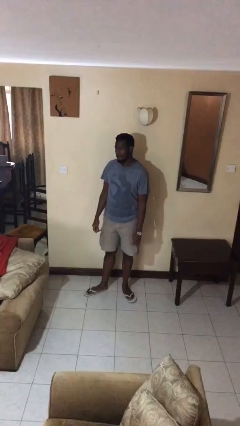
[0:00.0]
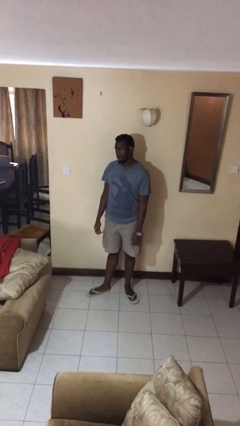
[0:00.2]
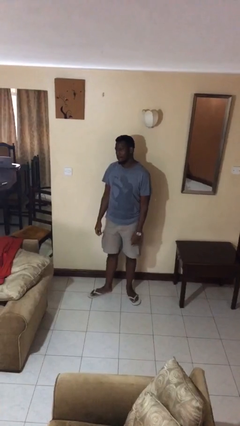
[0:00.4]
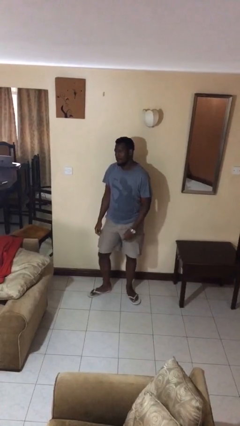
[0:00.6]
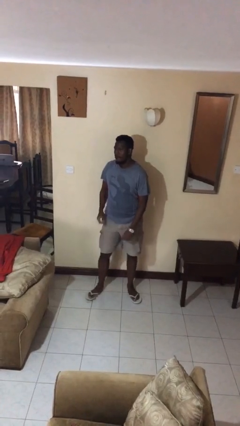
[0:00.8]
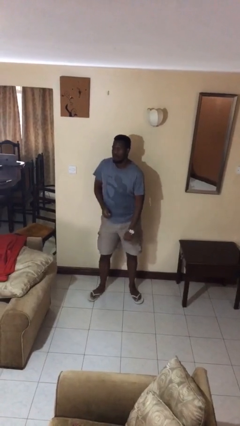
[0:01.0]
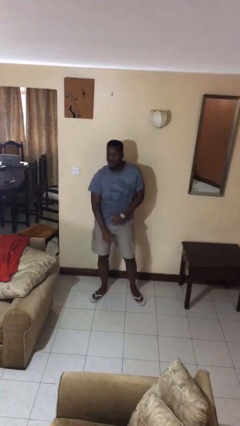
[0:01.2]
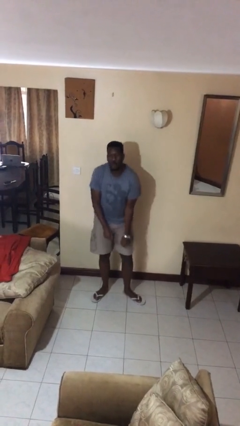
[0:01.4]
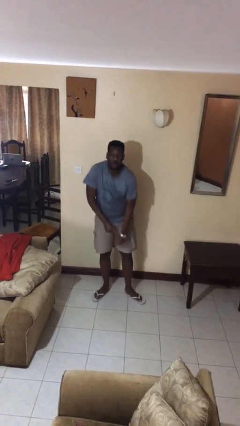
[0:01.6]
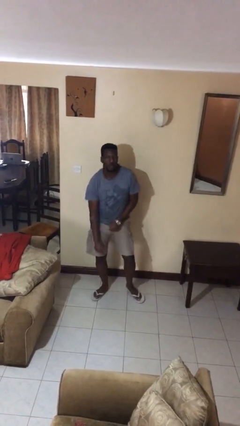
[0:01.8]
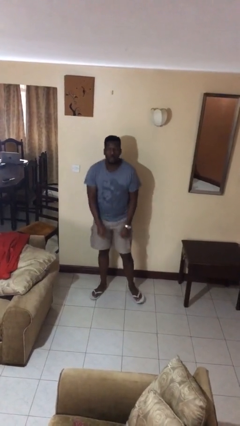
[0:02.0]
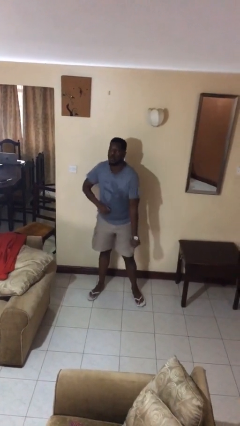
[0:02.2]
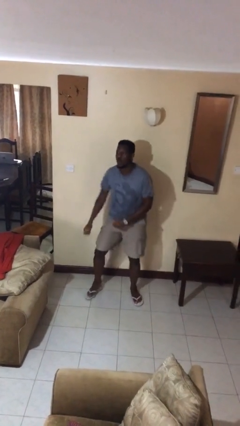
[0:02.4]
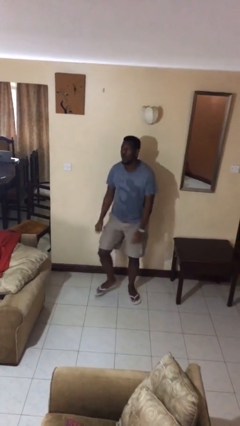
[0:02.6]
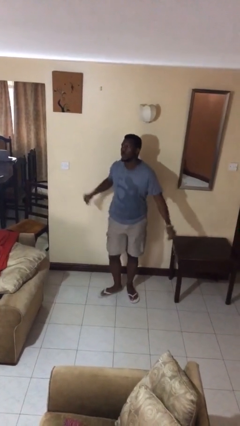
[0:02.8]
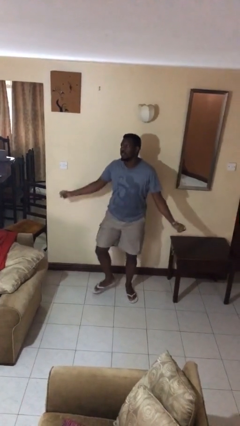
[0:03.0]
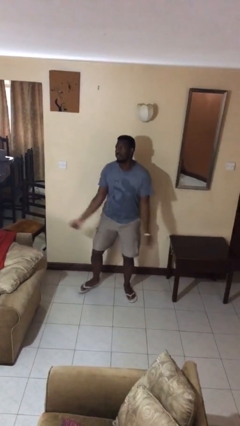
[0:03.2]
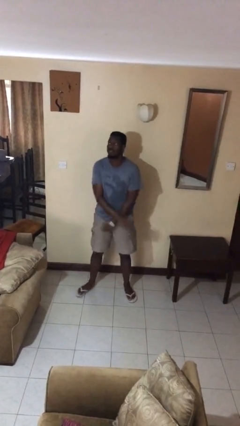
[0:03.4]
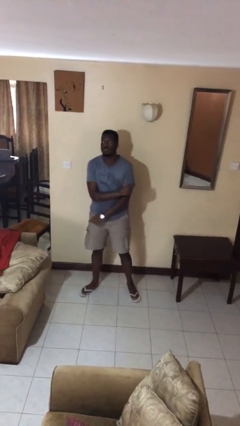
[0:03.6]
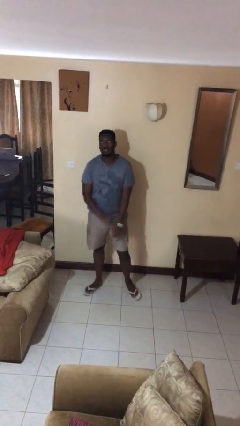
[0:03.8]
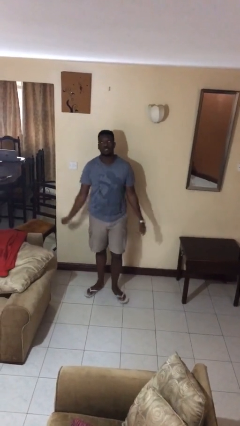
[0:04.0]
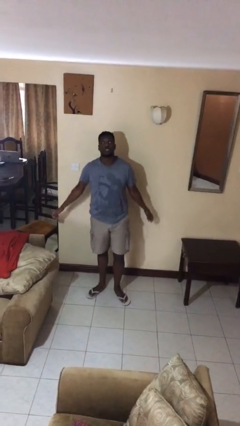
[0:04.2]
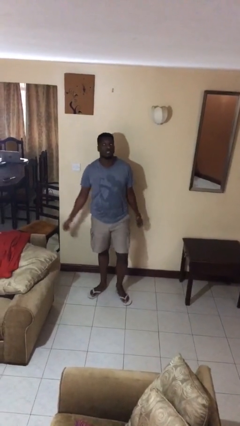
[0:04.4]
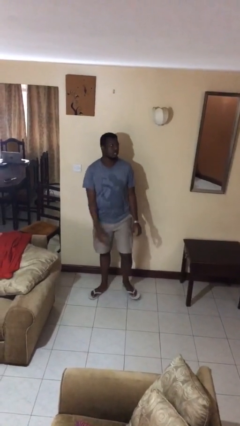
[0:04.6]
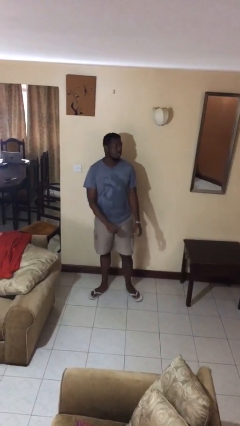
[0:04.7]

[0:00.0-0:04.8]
person dances in place

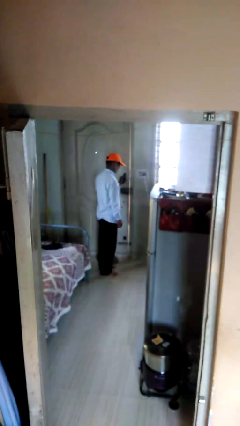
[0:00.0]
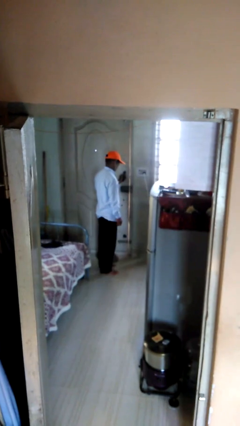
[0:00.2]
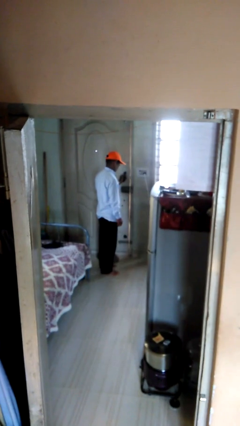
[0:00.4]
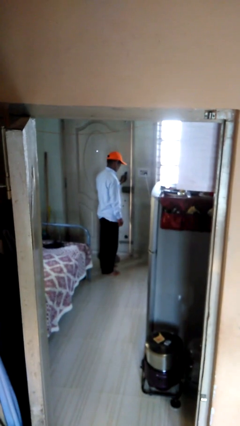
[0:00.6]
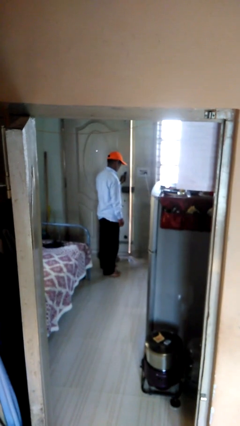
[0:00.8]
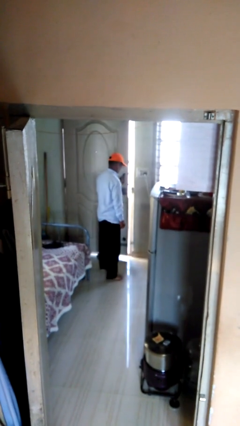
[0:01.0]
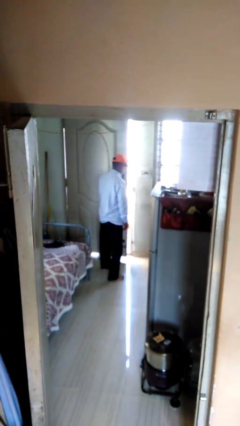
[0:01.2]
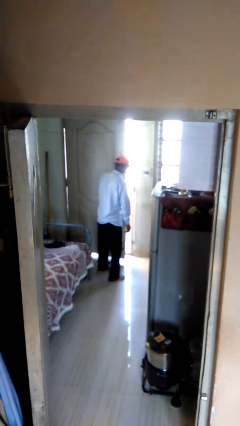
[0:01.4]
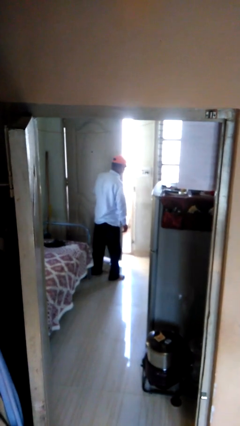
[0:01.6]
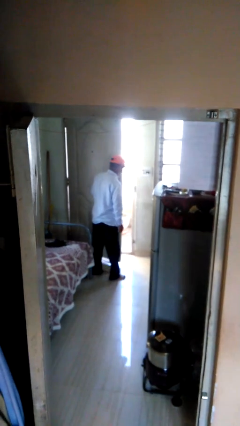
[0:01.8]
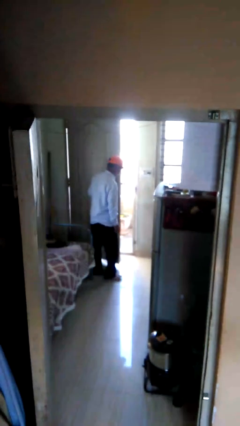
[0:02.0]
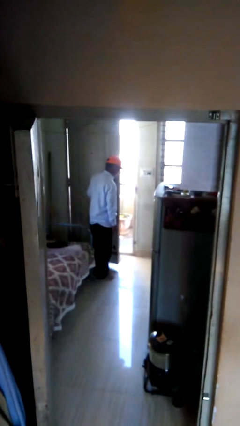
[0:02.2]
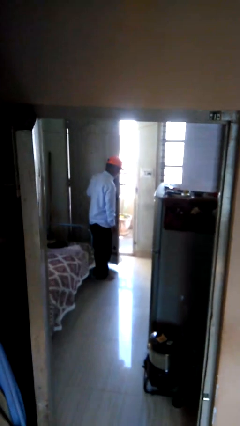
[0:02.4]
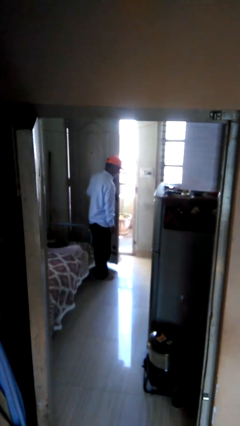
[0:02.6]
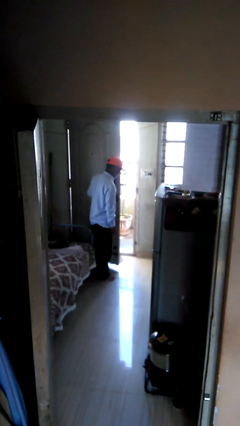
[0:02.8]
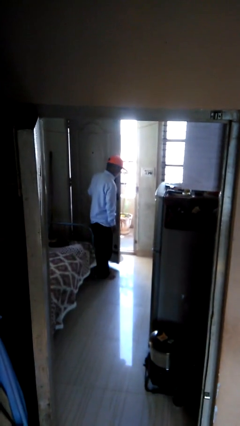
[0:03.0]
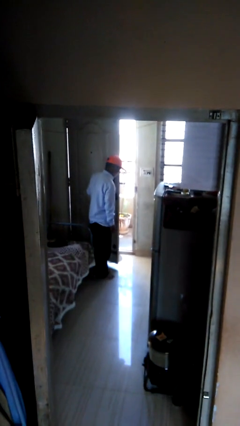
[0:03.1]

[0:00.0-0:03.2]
person opens facility door

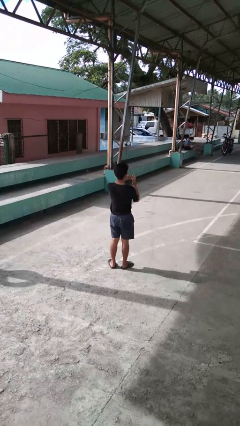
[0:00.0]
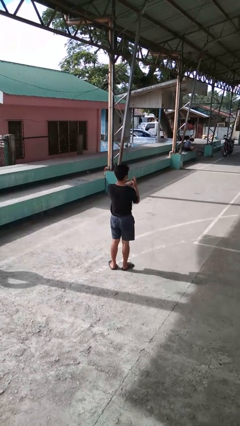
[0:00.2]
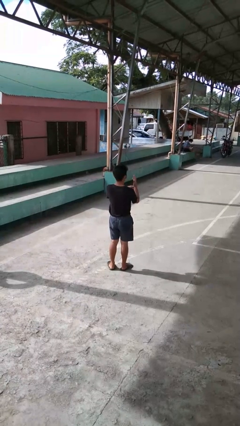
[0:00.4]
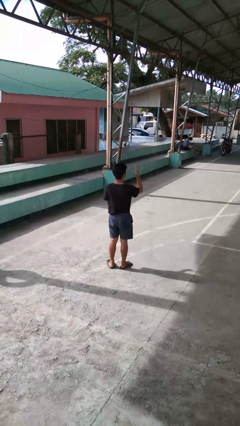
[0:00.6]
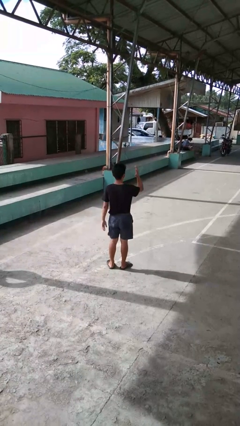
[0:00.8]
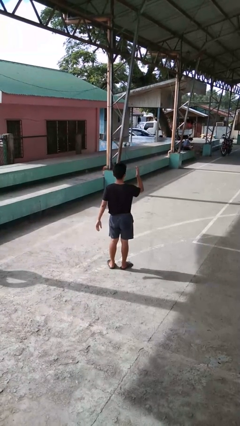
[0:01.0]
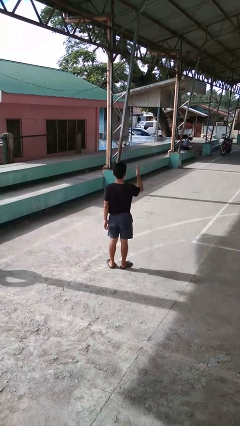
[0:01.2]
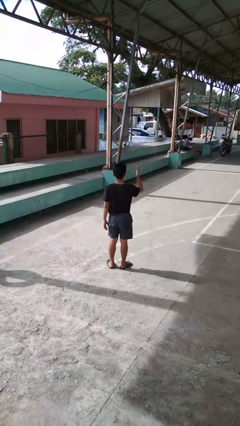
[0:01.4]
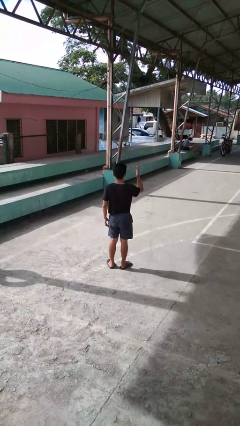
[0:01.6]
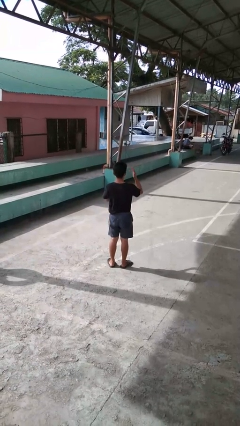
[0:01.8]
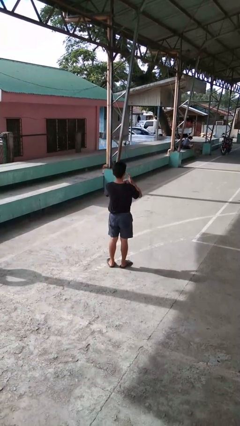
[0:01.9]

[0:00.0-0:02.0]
person puts on ring

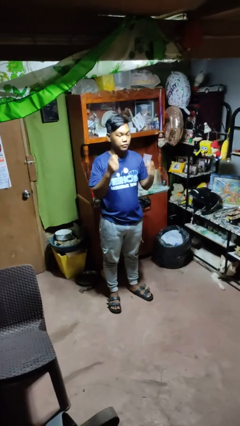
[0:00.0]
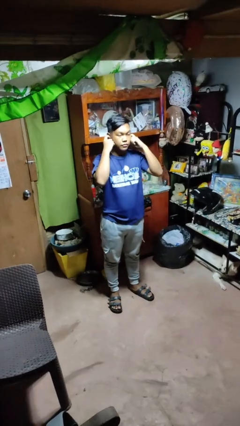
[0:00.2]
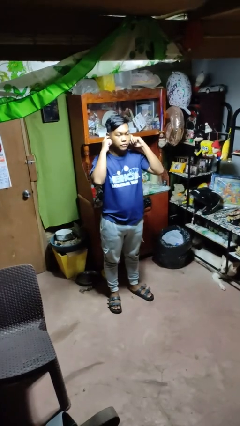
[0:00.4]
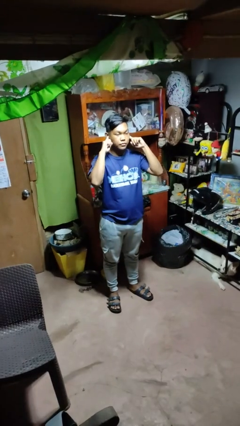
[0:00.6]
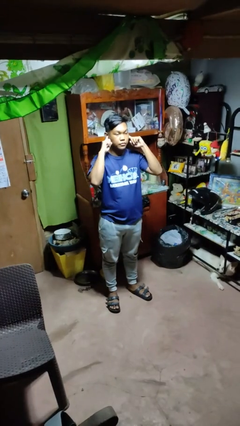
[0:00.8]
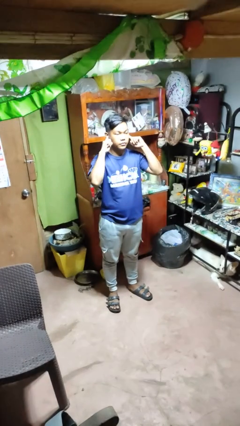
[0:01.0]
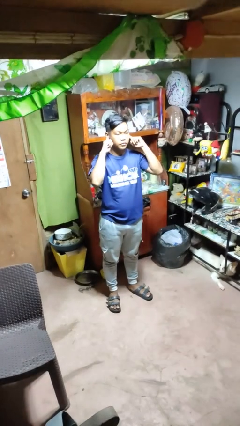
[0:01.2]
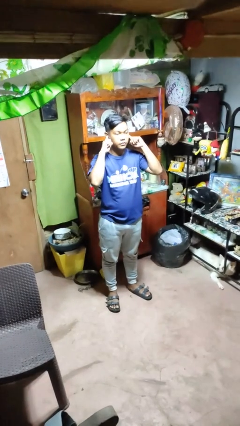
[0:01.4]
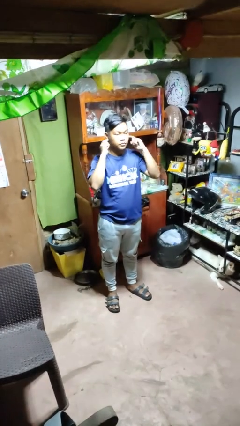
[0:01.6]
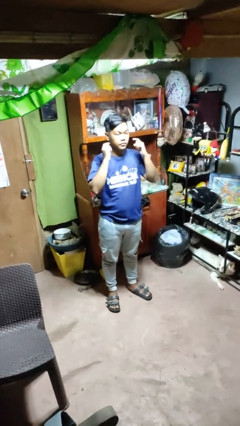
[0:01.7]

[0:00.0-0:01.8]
person puts fingers in ear

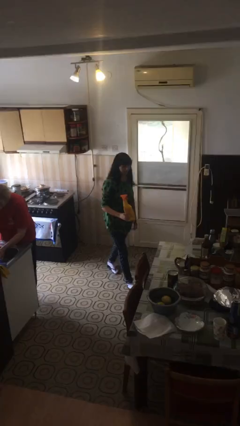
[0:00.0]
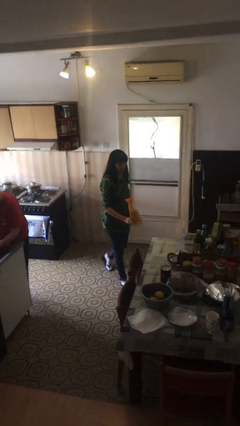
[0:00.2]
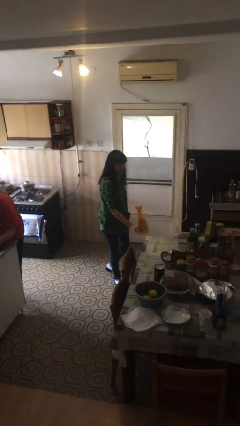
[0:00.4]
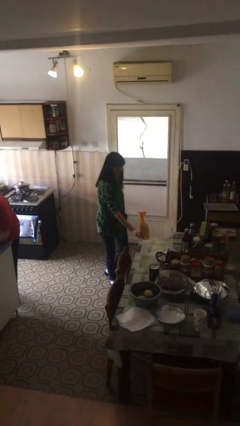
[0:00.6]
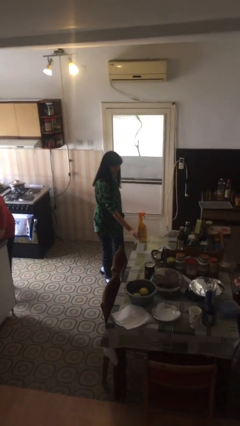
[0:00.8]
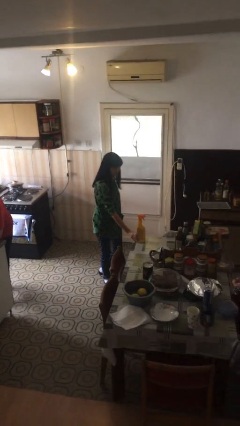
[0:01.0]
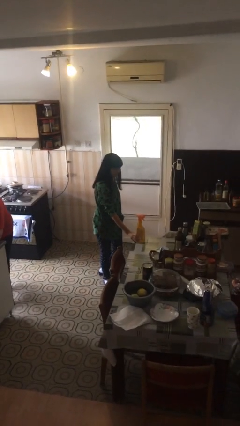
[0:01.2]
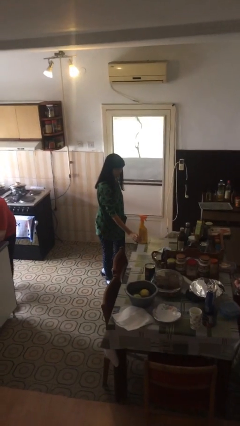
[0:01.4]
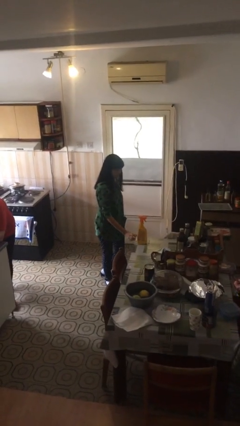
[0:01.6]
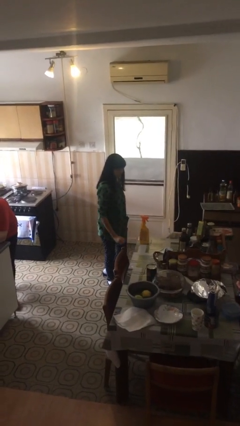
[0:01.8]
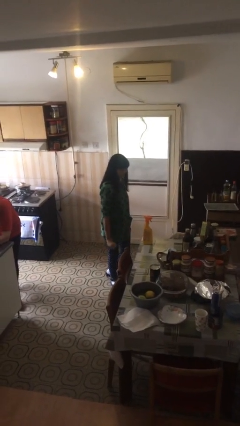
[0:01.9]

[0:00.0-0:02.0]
person puts down object on table

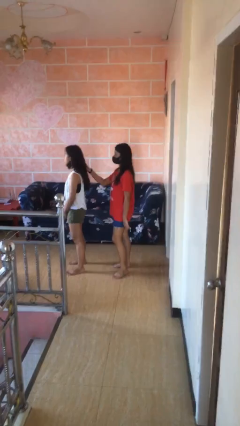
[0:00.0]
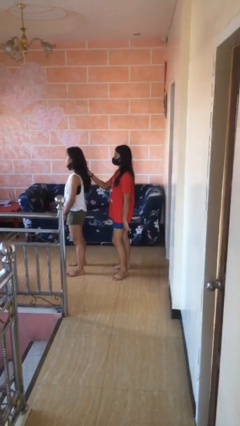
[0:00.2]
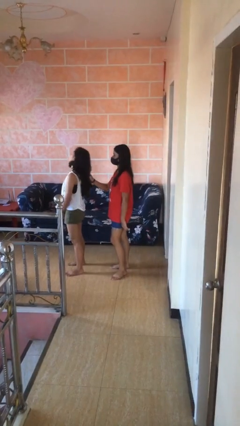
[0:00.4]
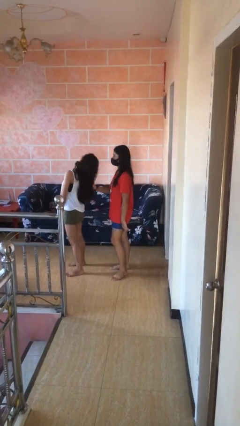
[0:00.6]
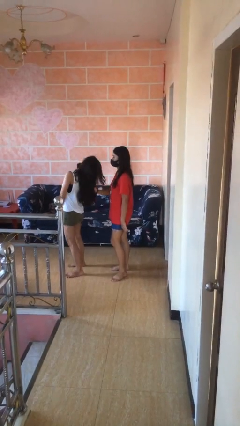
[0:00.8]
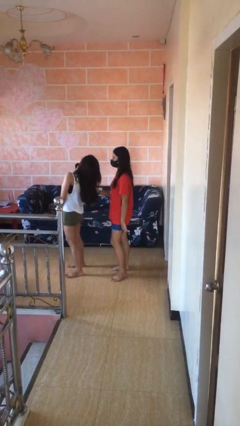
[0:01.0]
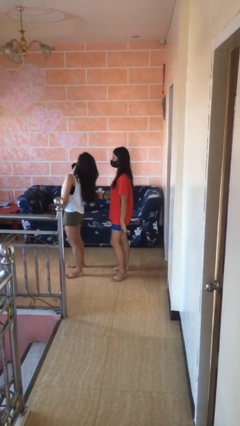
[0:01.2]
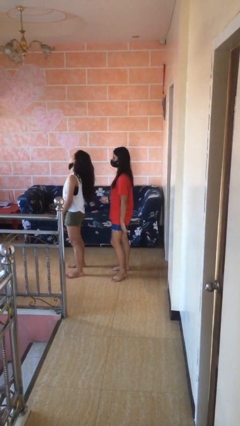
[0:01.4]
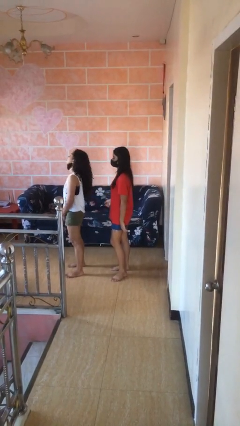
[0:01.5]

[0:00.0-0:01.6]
person grabs person by hair

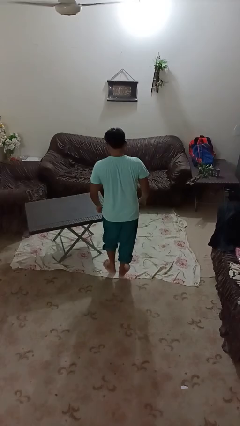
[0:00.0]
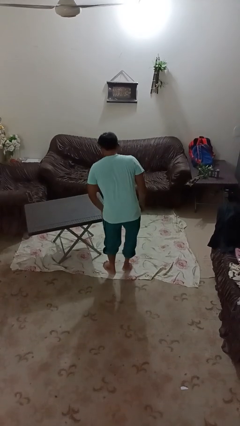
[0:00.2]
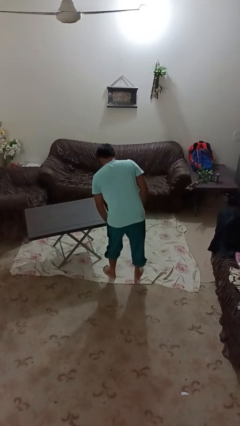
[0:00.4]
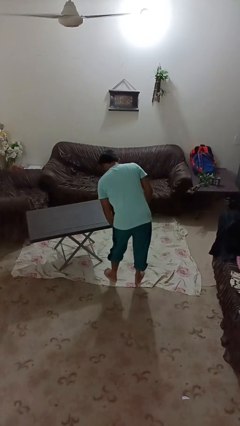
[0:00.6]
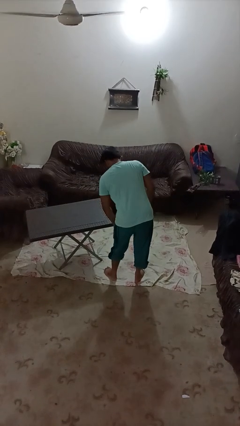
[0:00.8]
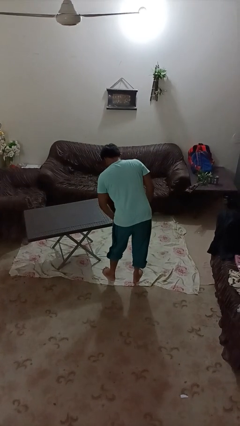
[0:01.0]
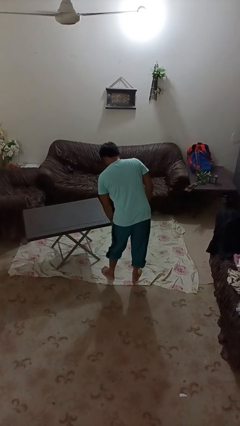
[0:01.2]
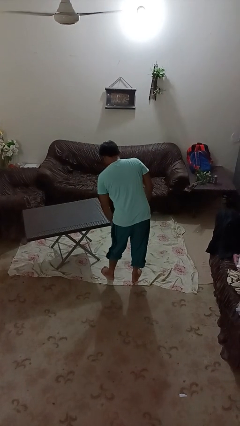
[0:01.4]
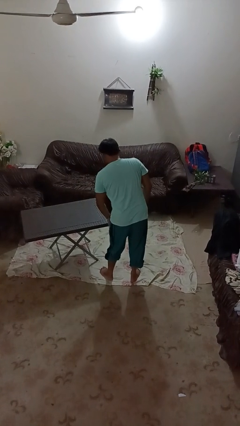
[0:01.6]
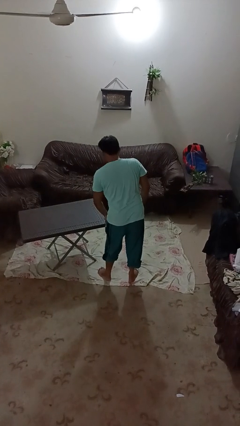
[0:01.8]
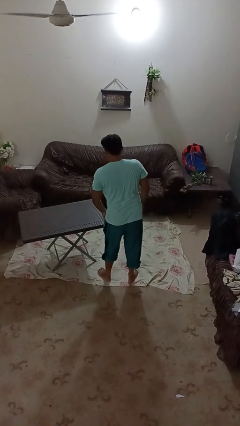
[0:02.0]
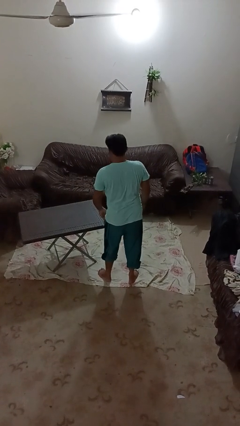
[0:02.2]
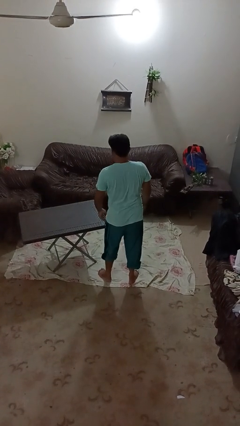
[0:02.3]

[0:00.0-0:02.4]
person bumps into table
